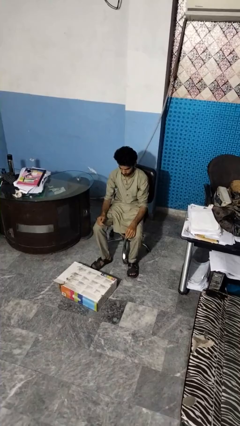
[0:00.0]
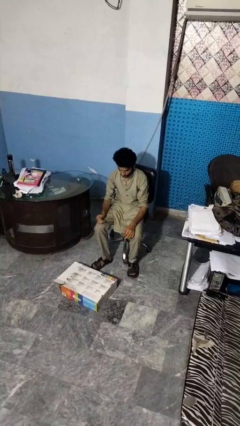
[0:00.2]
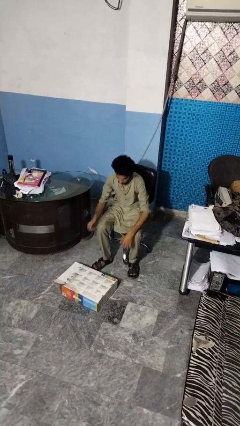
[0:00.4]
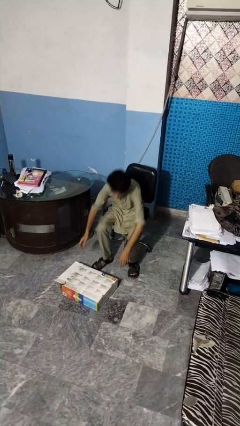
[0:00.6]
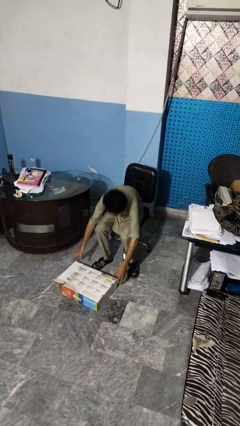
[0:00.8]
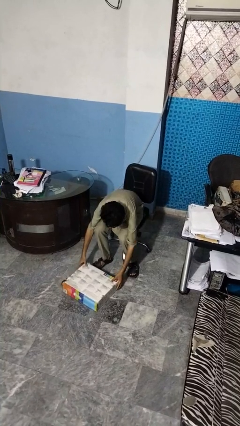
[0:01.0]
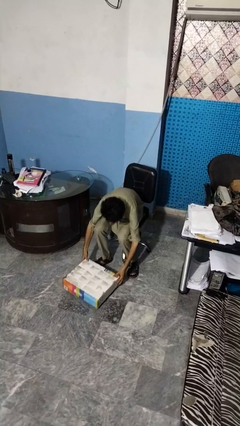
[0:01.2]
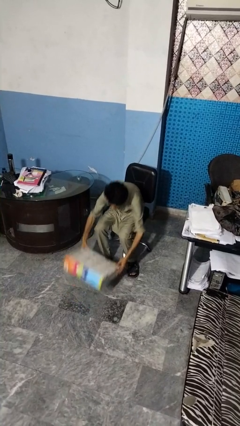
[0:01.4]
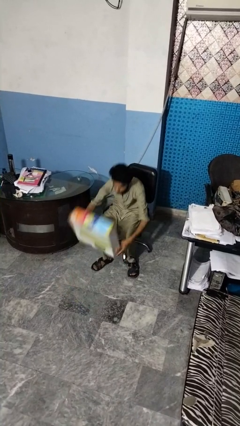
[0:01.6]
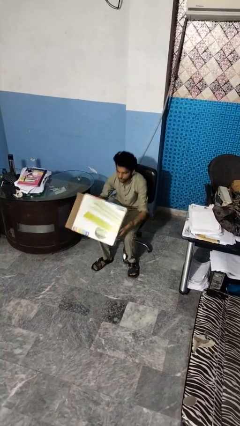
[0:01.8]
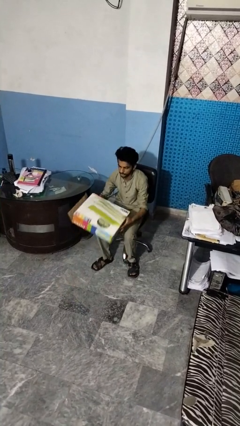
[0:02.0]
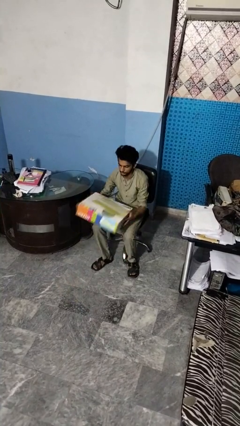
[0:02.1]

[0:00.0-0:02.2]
person picks up object from floor

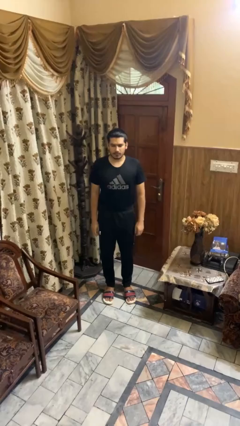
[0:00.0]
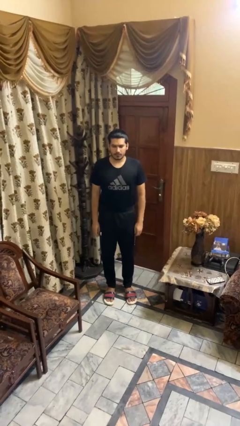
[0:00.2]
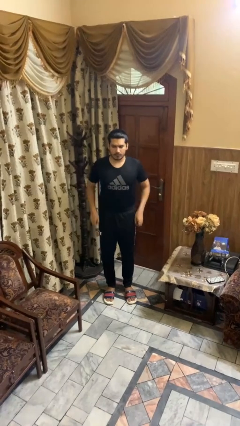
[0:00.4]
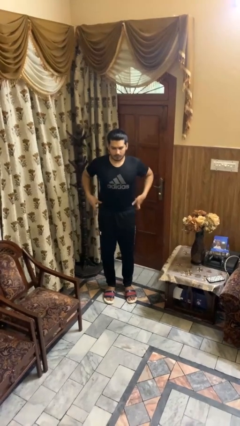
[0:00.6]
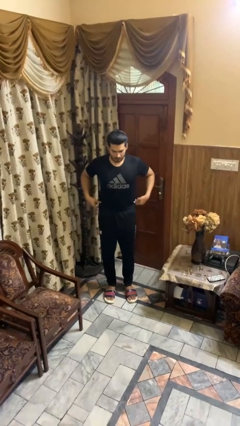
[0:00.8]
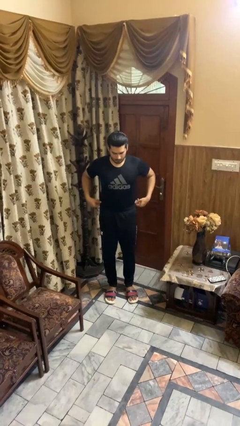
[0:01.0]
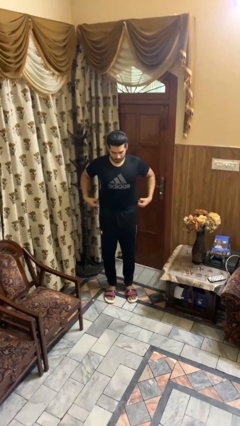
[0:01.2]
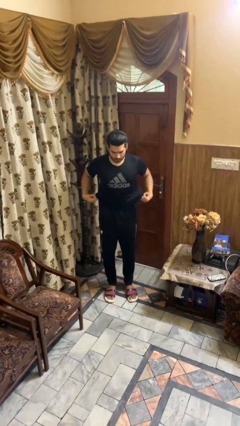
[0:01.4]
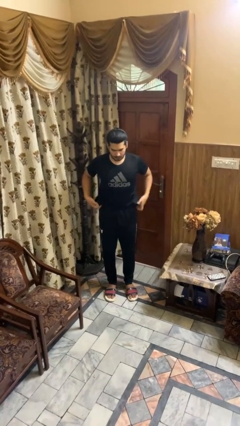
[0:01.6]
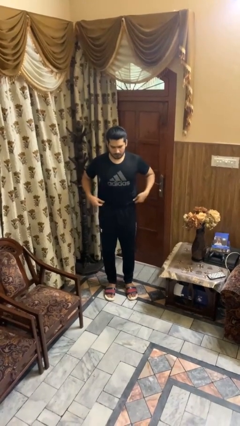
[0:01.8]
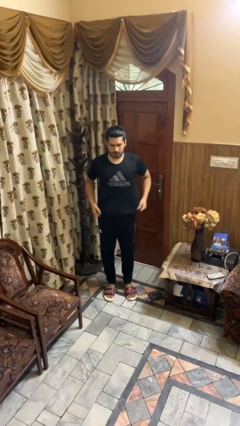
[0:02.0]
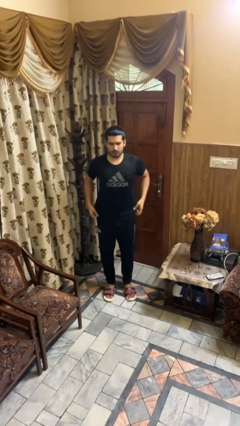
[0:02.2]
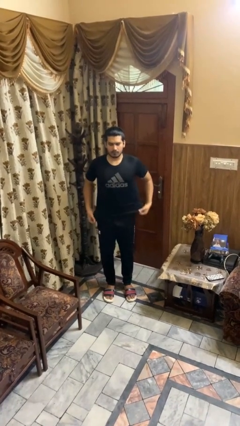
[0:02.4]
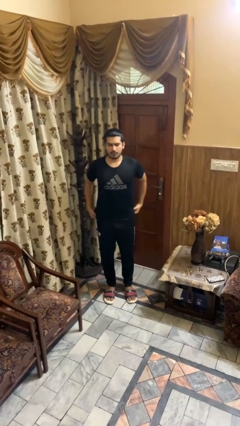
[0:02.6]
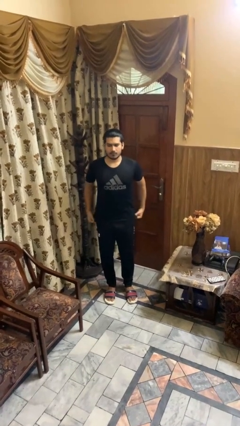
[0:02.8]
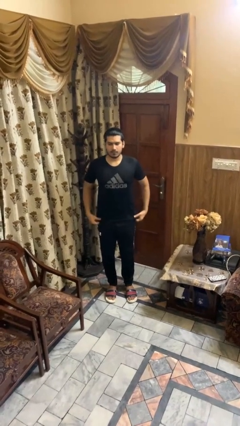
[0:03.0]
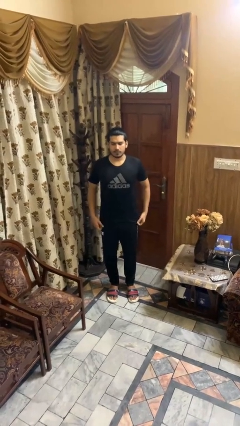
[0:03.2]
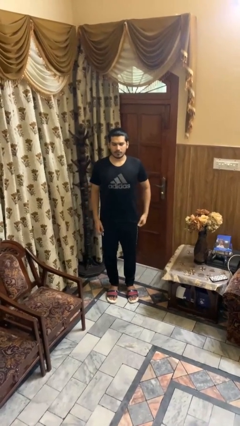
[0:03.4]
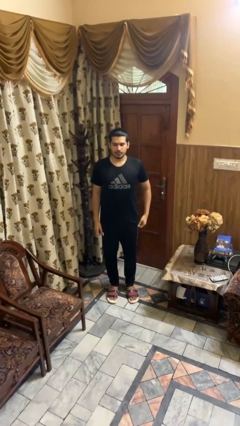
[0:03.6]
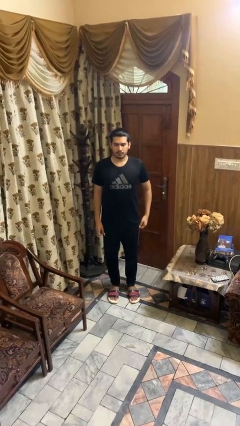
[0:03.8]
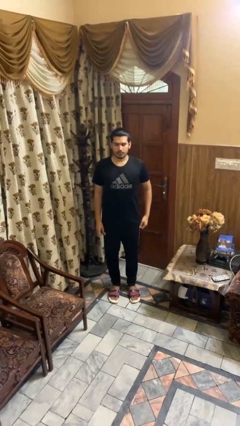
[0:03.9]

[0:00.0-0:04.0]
person untucks shirt

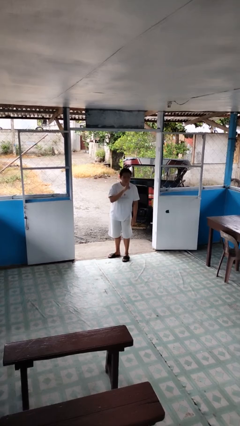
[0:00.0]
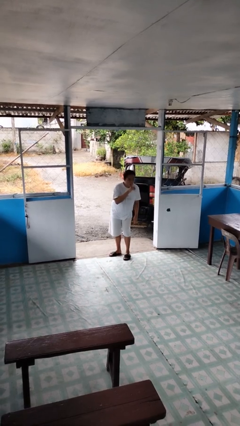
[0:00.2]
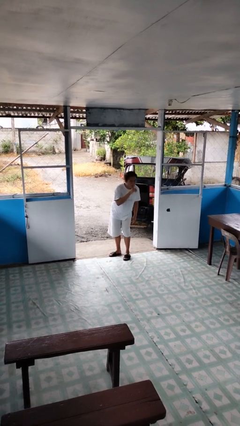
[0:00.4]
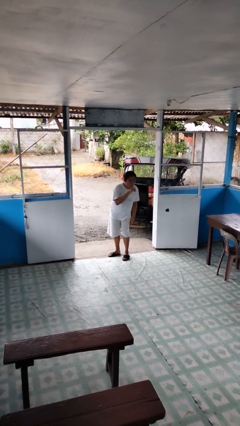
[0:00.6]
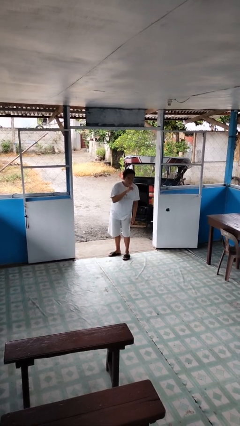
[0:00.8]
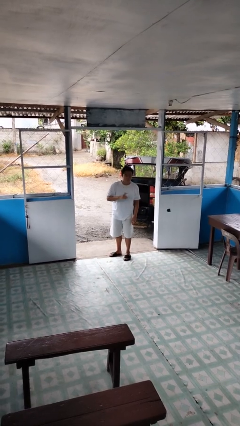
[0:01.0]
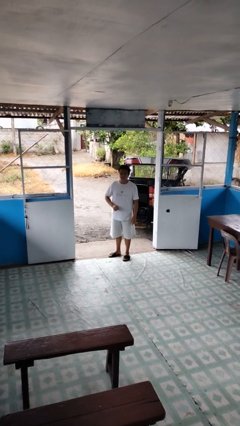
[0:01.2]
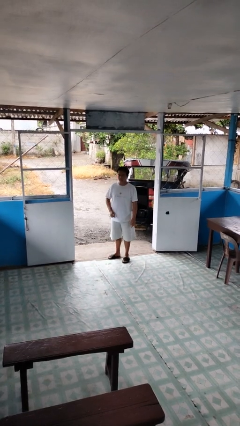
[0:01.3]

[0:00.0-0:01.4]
person gestures be quiet

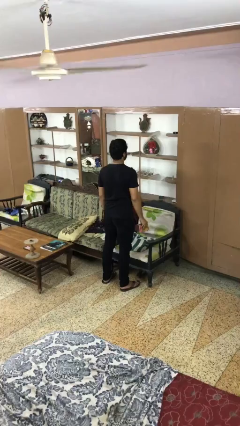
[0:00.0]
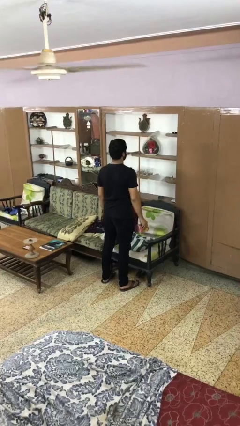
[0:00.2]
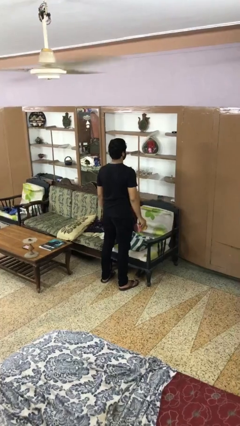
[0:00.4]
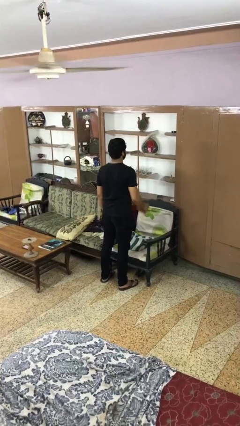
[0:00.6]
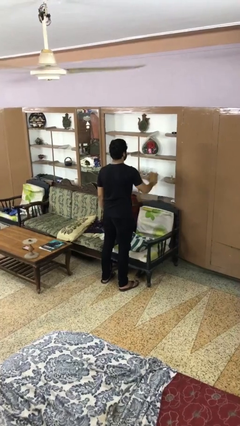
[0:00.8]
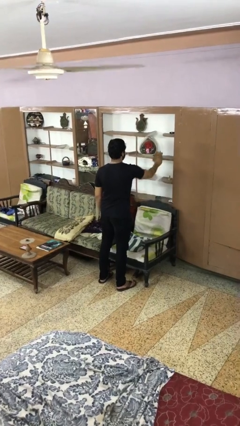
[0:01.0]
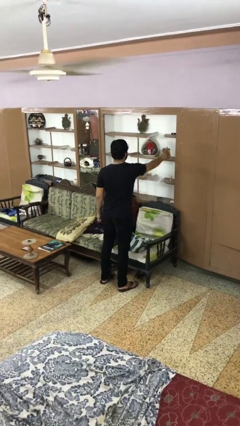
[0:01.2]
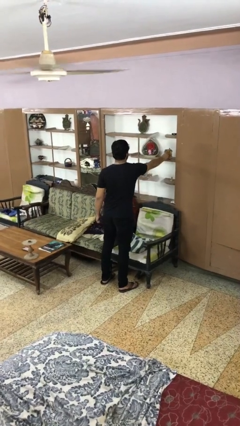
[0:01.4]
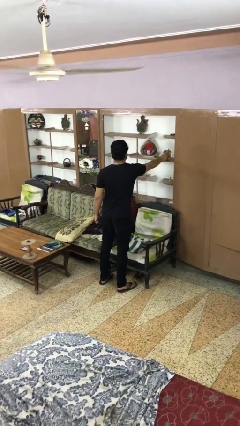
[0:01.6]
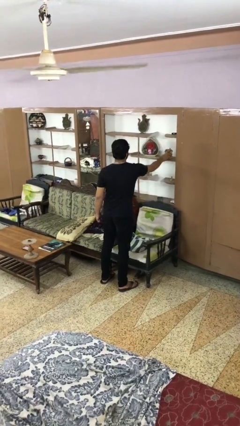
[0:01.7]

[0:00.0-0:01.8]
person puts down object on shelf

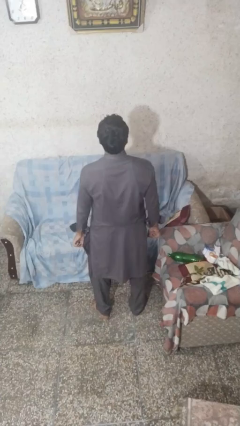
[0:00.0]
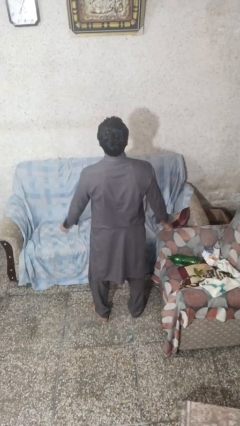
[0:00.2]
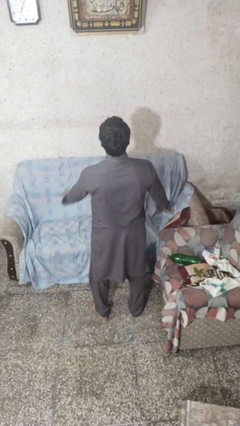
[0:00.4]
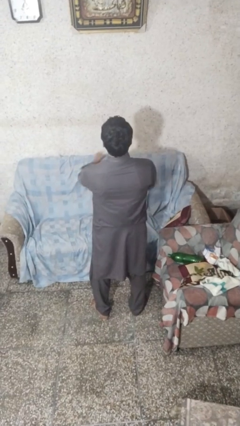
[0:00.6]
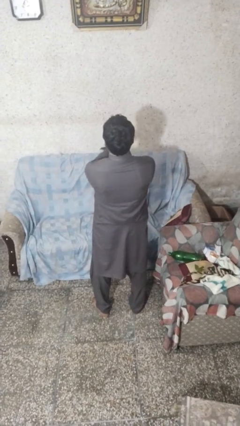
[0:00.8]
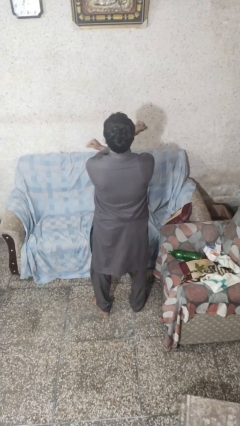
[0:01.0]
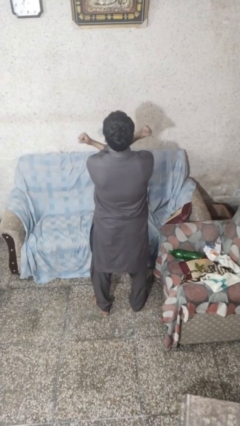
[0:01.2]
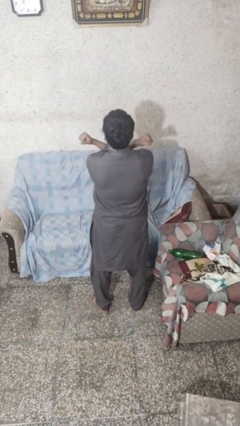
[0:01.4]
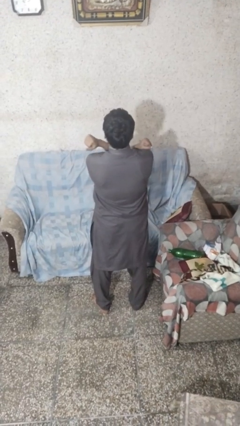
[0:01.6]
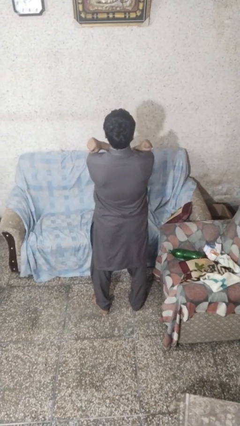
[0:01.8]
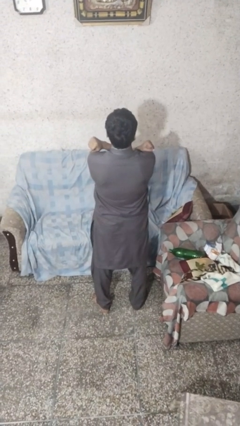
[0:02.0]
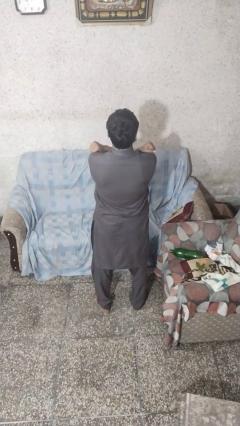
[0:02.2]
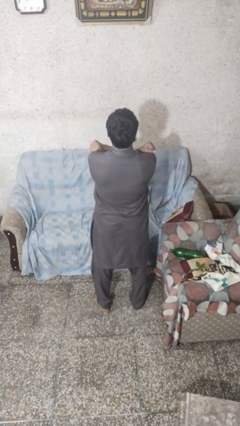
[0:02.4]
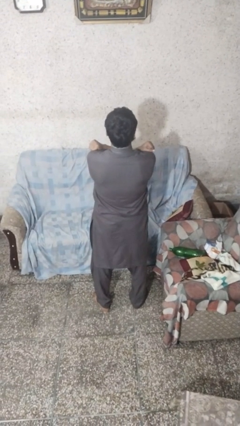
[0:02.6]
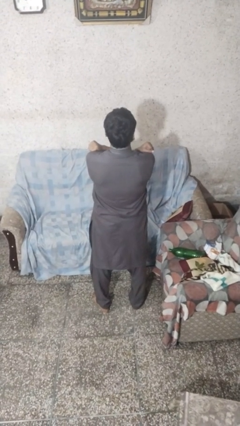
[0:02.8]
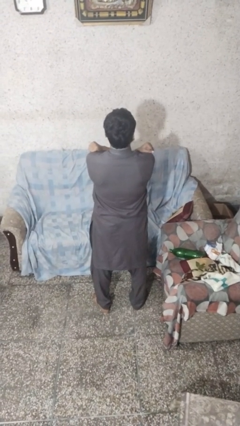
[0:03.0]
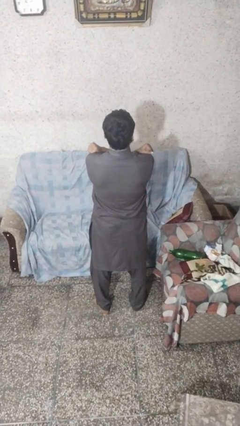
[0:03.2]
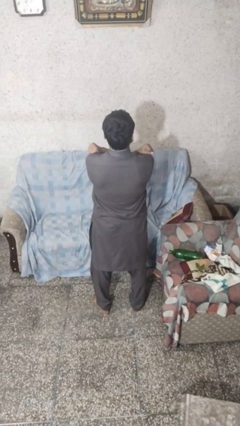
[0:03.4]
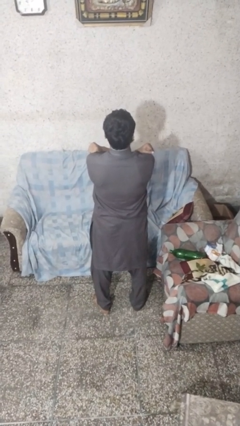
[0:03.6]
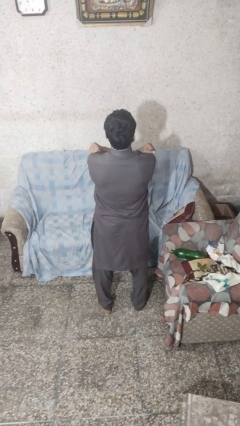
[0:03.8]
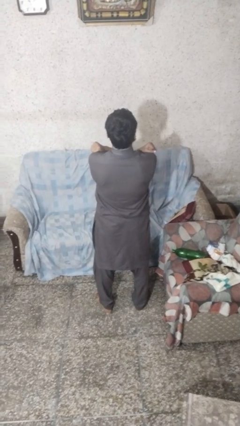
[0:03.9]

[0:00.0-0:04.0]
person gestures arms x

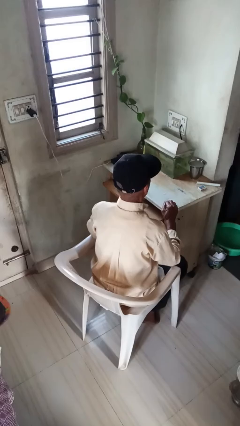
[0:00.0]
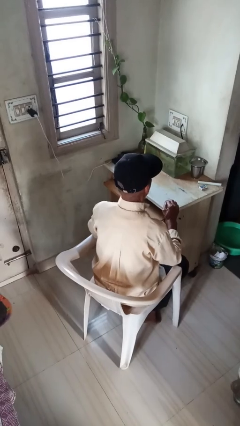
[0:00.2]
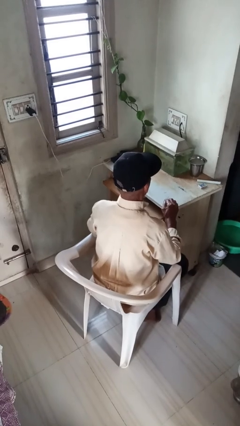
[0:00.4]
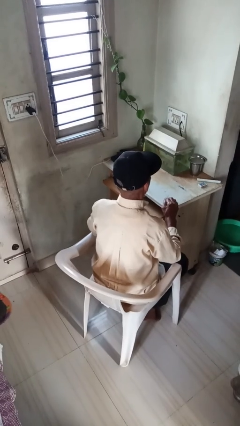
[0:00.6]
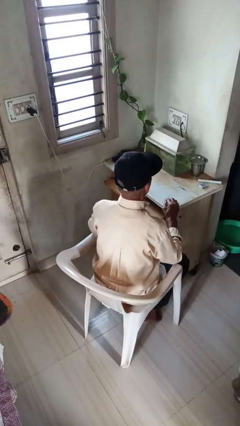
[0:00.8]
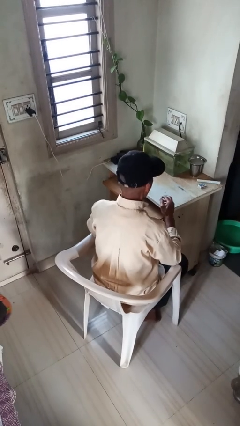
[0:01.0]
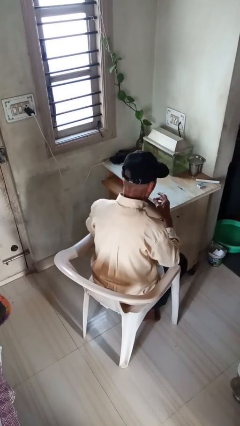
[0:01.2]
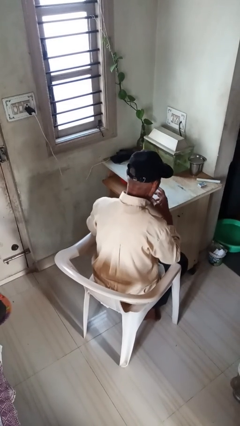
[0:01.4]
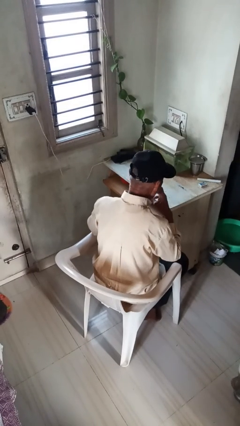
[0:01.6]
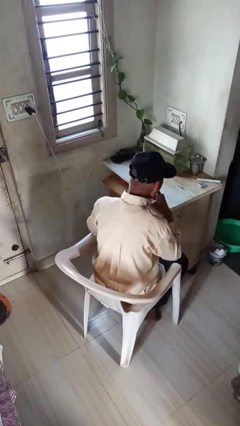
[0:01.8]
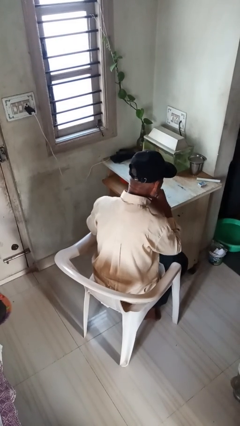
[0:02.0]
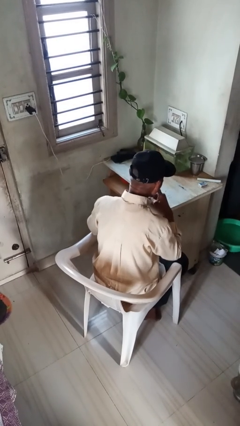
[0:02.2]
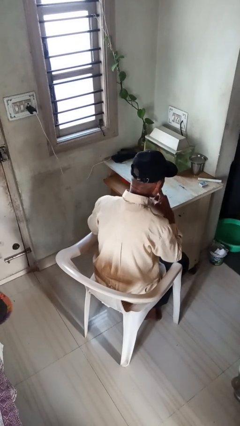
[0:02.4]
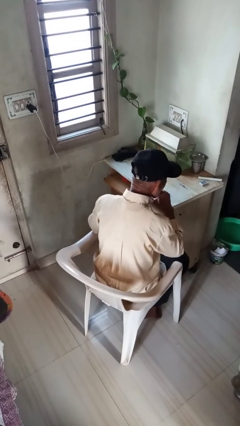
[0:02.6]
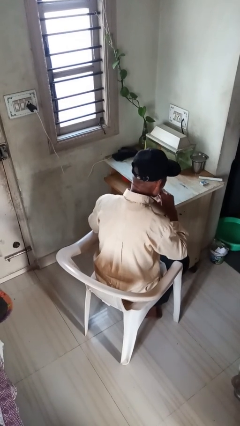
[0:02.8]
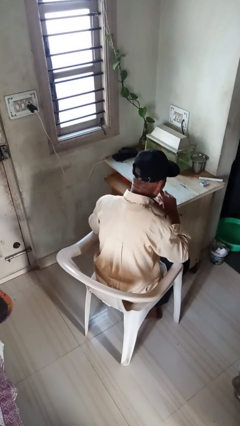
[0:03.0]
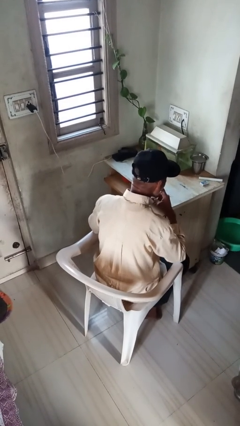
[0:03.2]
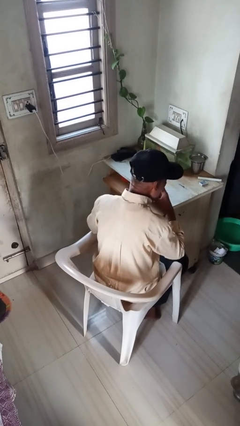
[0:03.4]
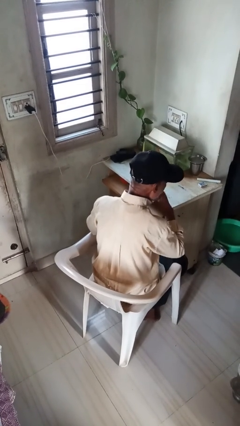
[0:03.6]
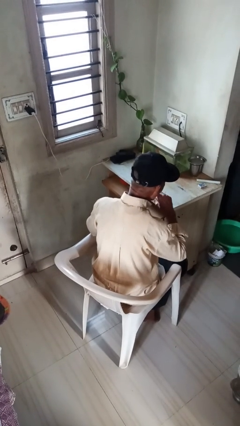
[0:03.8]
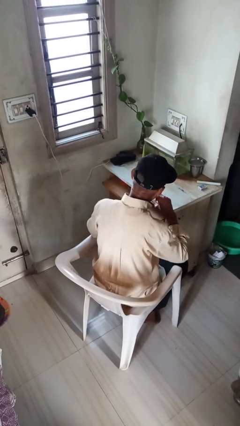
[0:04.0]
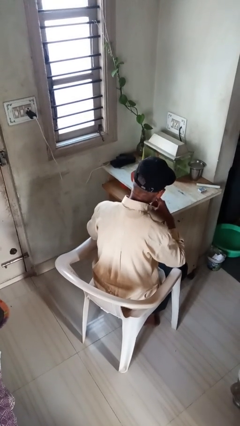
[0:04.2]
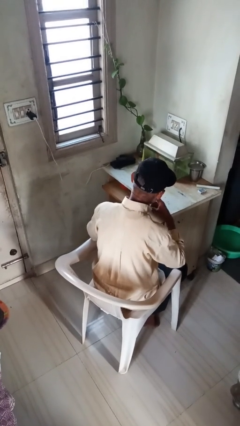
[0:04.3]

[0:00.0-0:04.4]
person licks fingers
